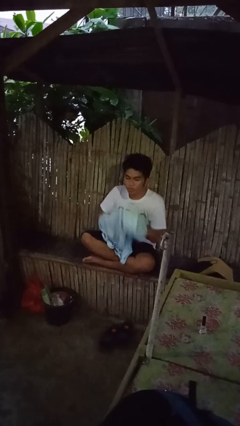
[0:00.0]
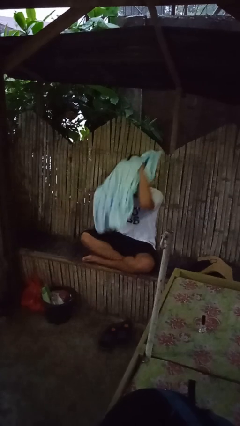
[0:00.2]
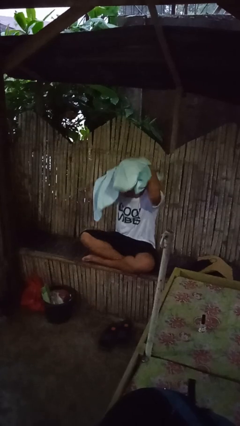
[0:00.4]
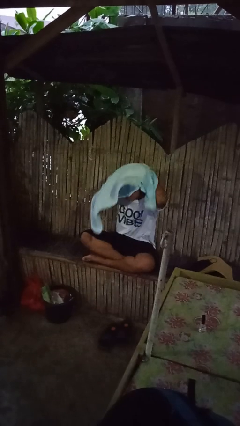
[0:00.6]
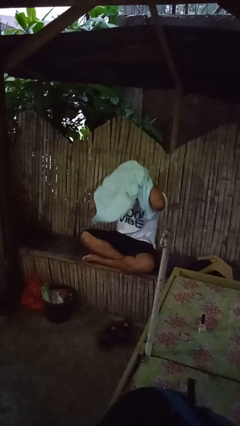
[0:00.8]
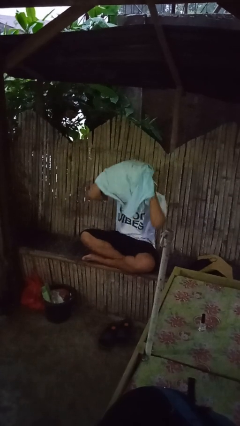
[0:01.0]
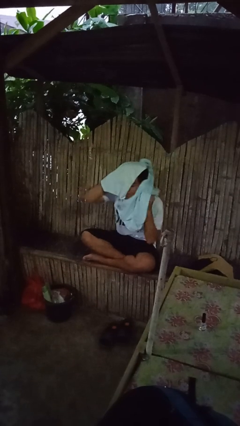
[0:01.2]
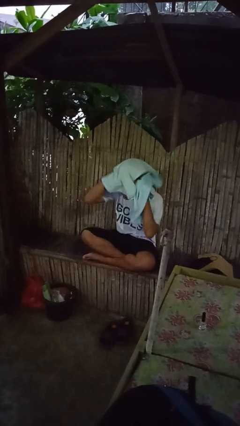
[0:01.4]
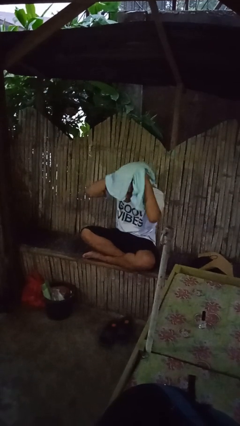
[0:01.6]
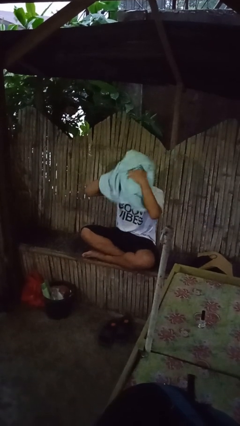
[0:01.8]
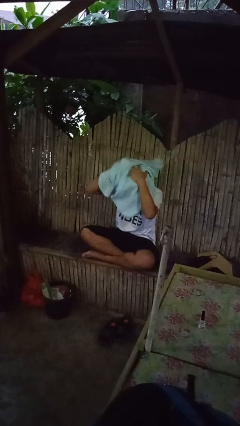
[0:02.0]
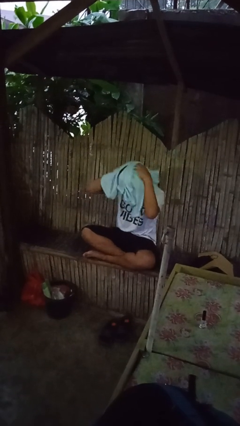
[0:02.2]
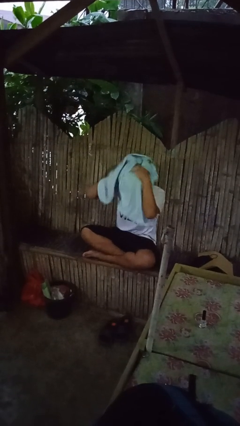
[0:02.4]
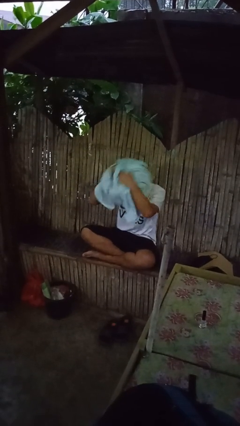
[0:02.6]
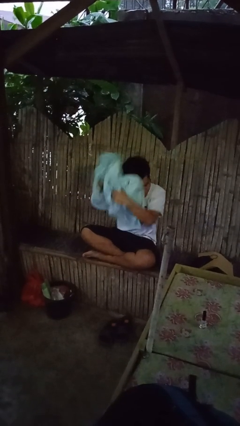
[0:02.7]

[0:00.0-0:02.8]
person dries hair with towel

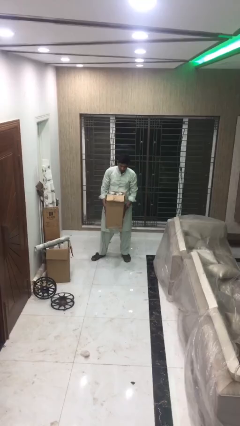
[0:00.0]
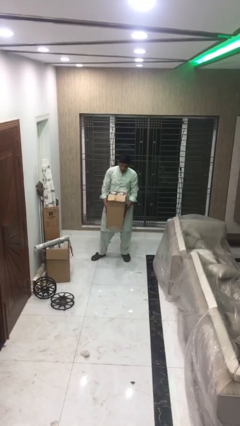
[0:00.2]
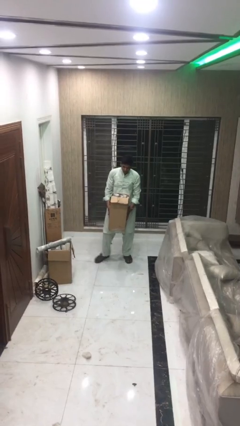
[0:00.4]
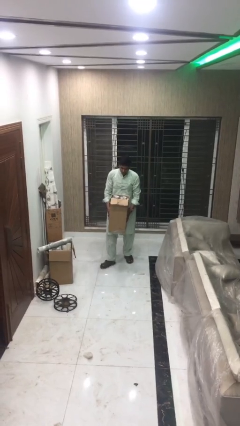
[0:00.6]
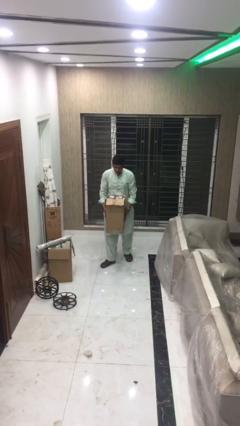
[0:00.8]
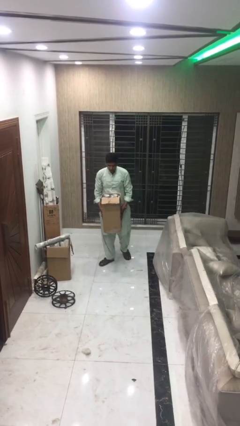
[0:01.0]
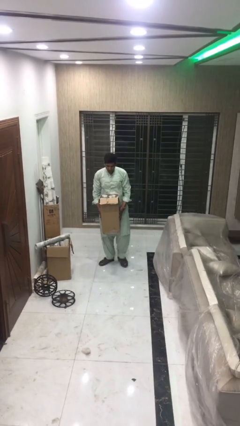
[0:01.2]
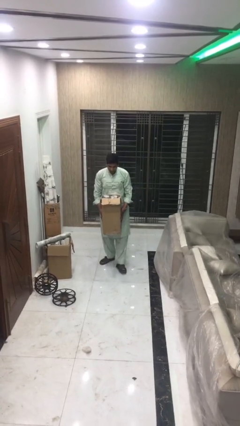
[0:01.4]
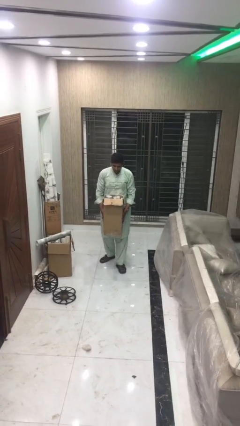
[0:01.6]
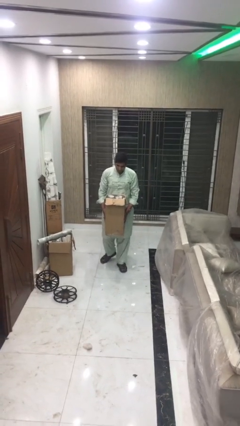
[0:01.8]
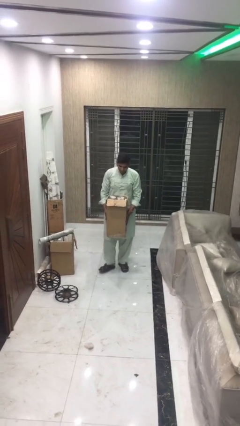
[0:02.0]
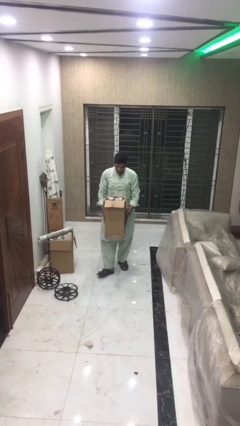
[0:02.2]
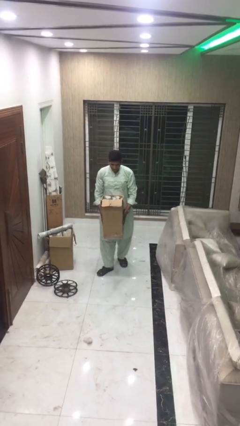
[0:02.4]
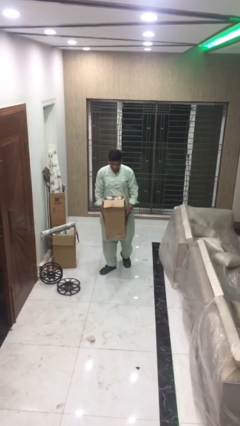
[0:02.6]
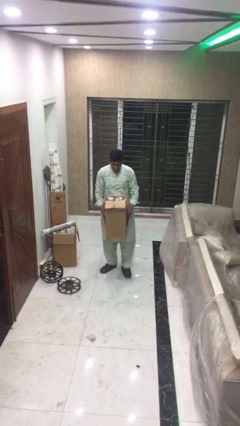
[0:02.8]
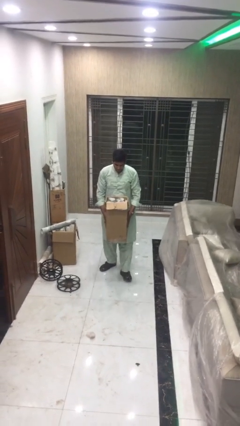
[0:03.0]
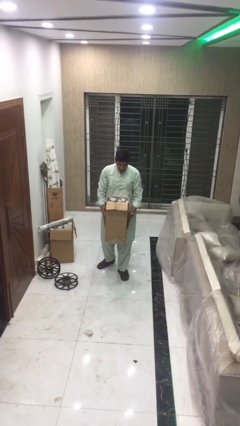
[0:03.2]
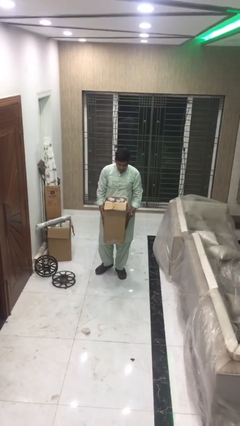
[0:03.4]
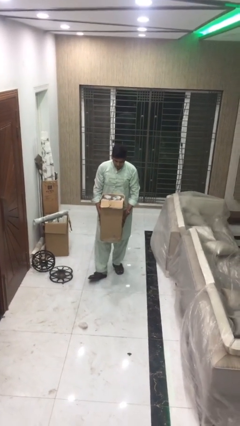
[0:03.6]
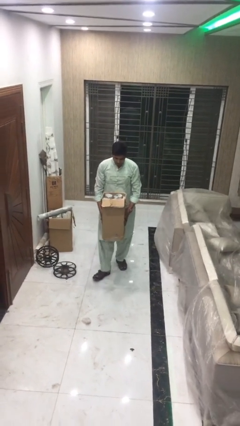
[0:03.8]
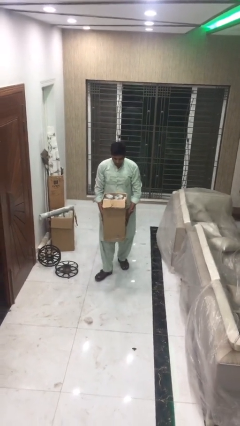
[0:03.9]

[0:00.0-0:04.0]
person carries heavy object

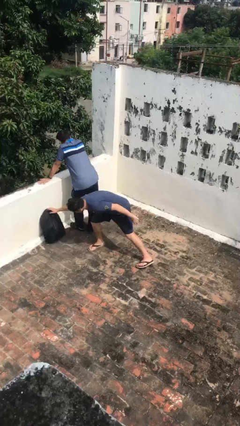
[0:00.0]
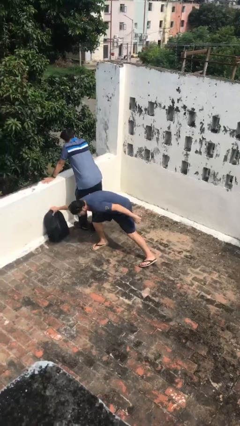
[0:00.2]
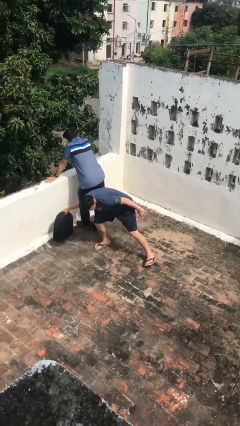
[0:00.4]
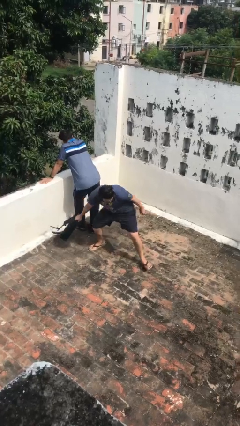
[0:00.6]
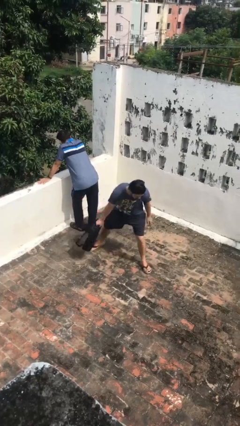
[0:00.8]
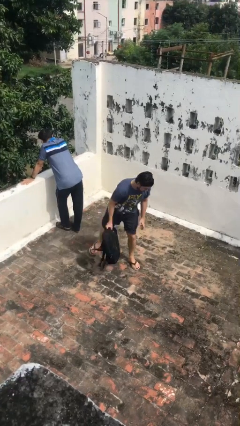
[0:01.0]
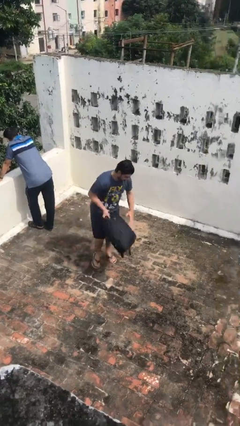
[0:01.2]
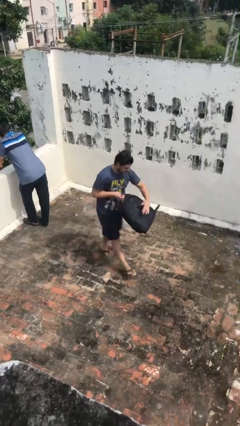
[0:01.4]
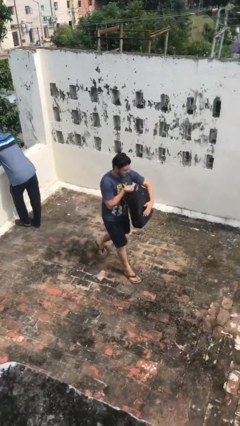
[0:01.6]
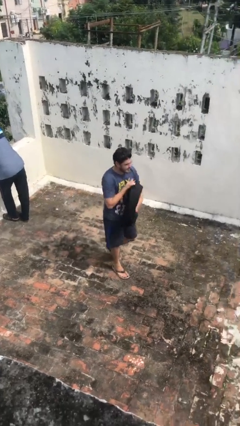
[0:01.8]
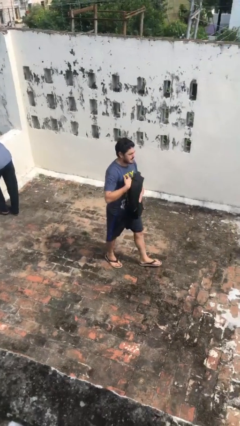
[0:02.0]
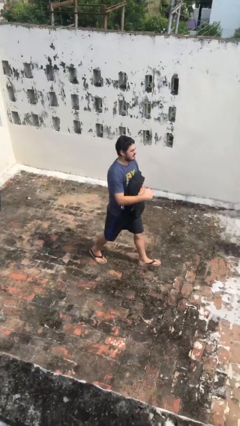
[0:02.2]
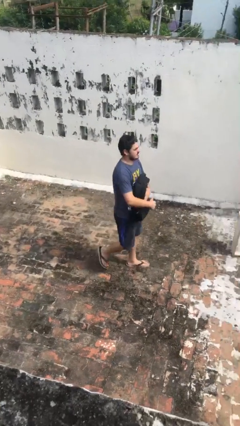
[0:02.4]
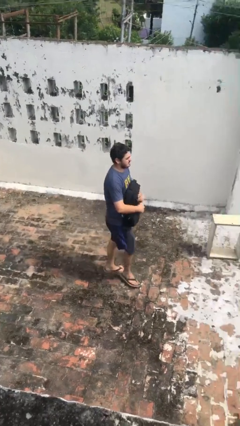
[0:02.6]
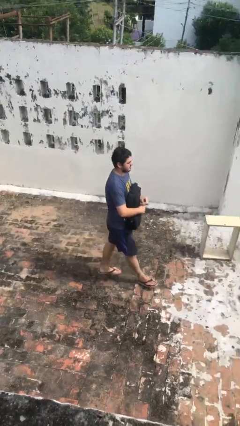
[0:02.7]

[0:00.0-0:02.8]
person steals object from person

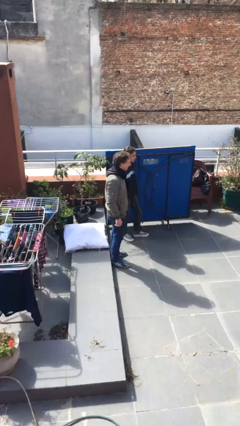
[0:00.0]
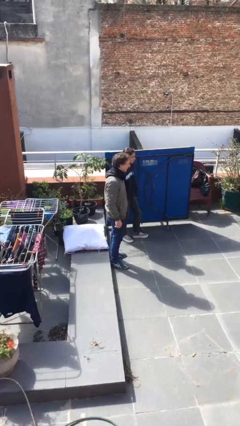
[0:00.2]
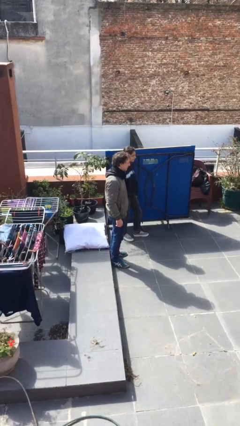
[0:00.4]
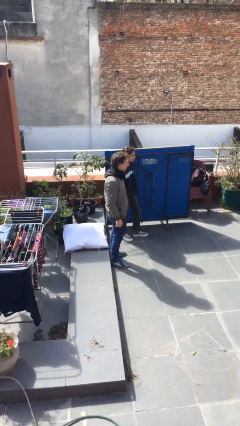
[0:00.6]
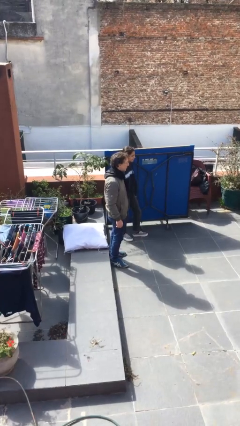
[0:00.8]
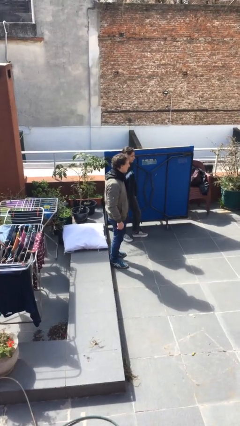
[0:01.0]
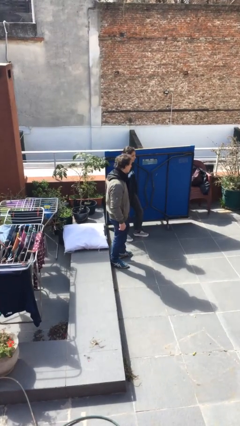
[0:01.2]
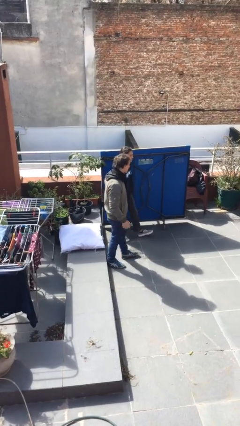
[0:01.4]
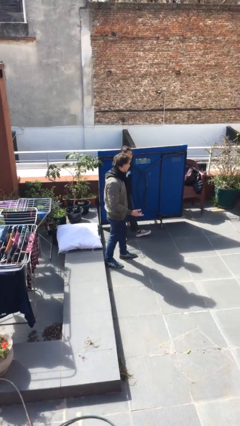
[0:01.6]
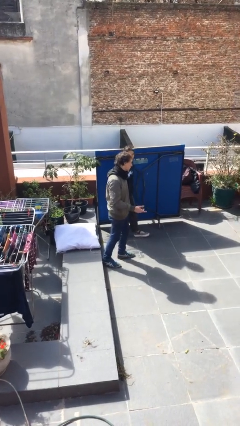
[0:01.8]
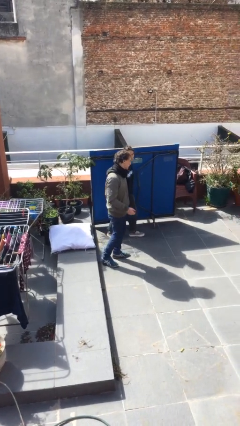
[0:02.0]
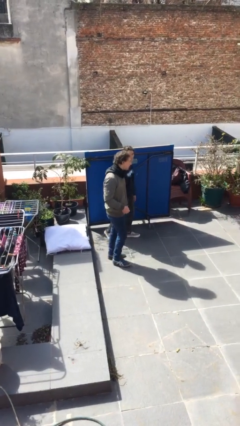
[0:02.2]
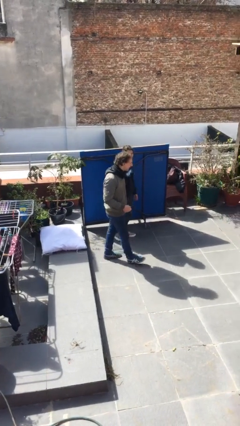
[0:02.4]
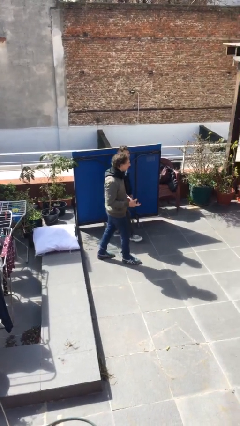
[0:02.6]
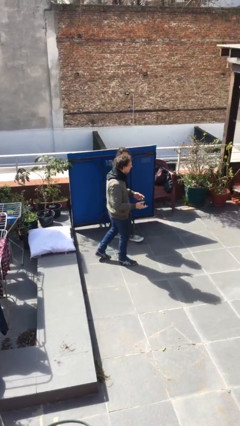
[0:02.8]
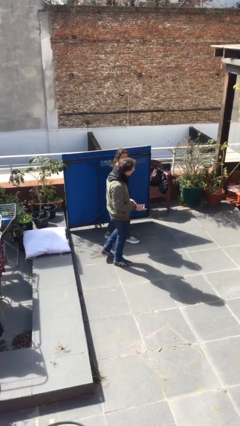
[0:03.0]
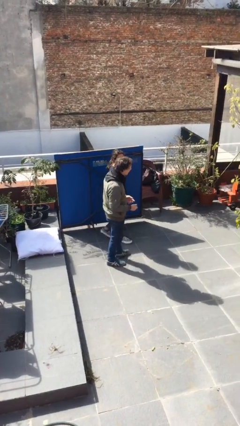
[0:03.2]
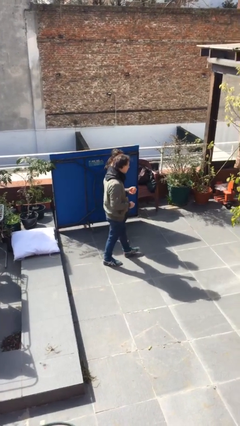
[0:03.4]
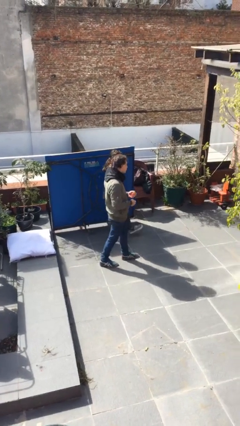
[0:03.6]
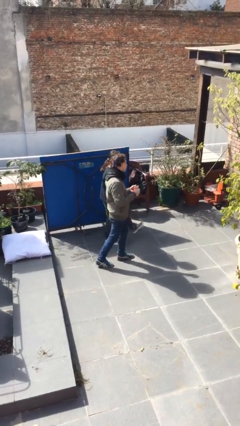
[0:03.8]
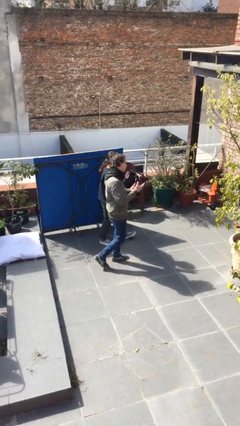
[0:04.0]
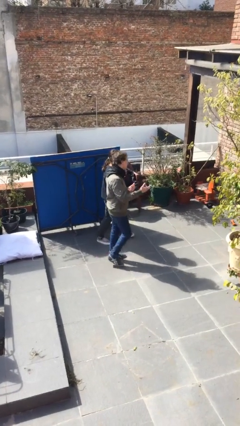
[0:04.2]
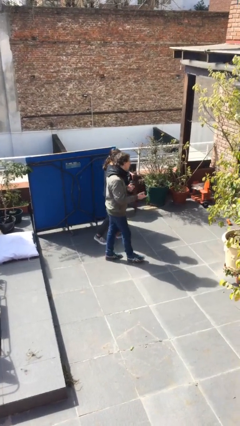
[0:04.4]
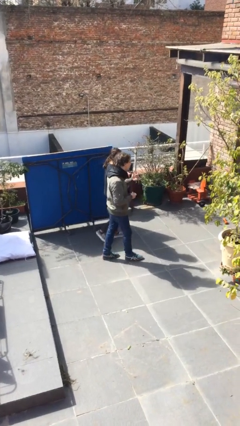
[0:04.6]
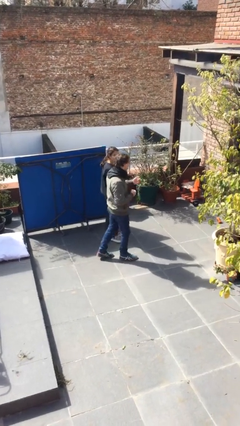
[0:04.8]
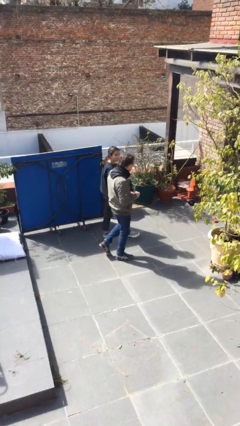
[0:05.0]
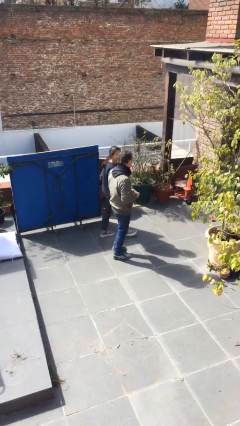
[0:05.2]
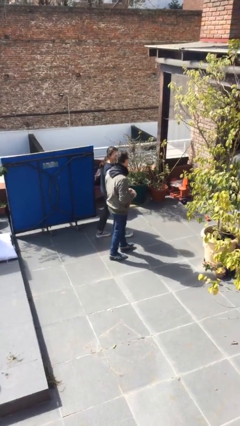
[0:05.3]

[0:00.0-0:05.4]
person talks to person

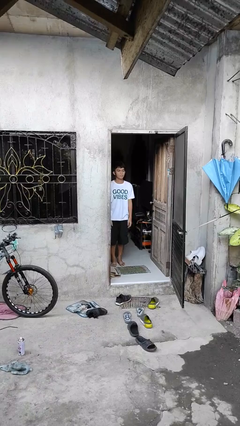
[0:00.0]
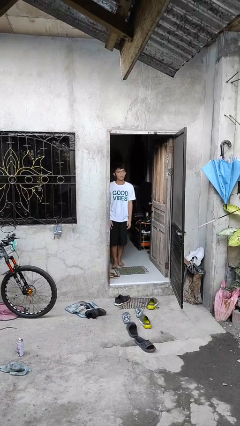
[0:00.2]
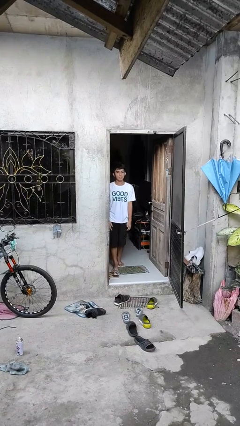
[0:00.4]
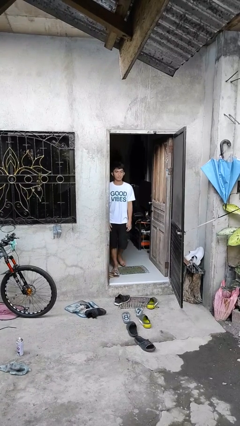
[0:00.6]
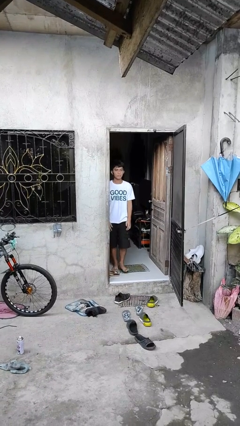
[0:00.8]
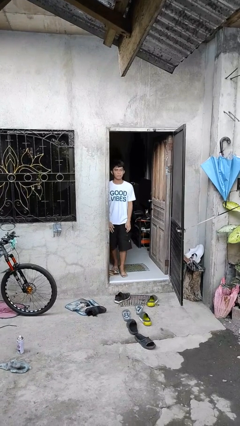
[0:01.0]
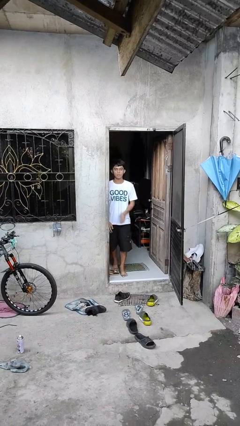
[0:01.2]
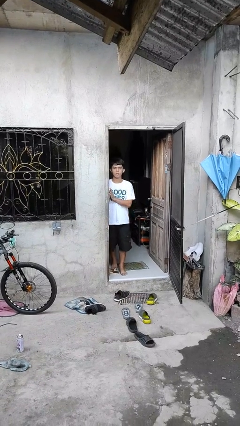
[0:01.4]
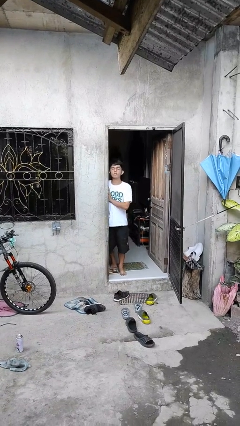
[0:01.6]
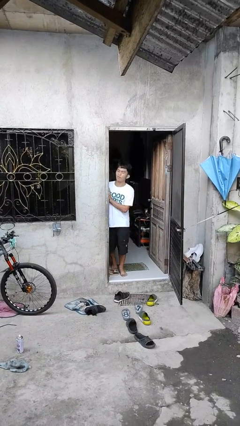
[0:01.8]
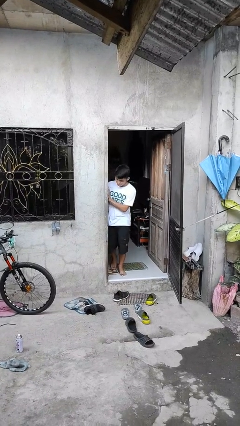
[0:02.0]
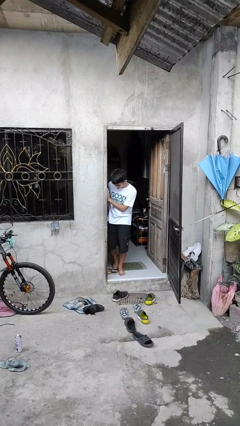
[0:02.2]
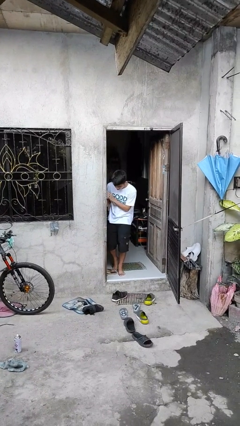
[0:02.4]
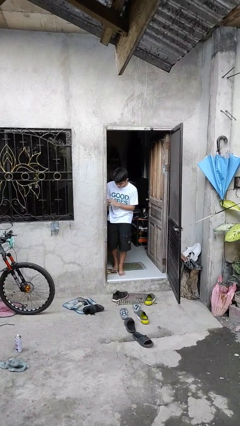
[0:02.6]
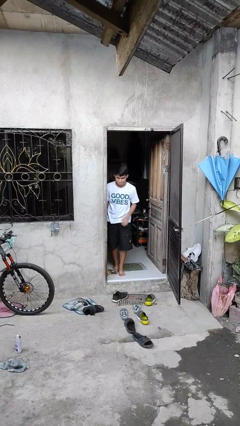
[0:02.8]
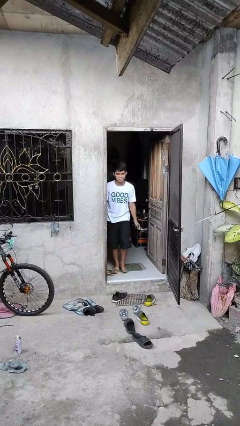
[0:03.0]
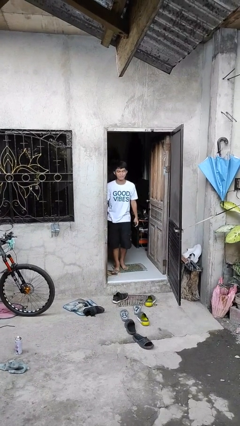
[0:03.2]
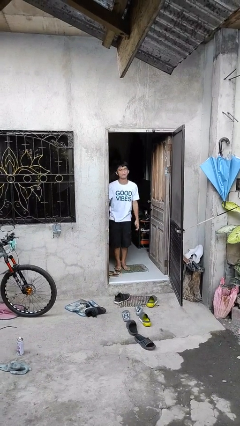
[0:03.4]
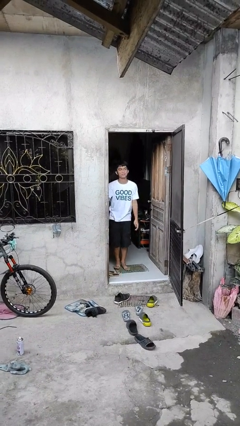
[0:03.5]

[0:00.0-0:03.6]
person bumps into wall
